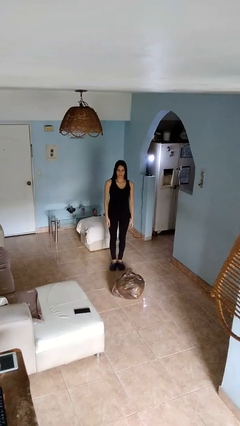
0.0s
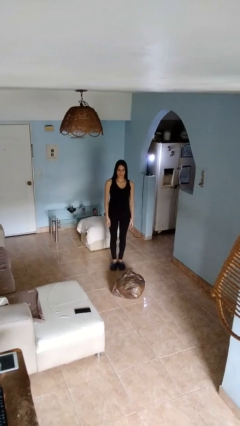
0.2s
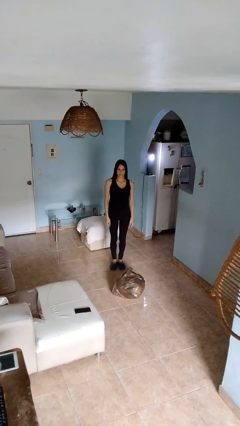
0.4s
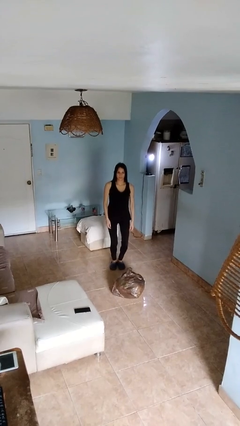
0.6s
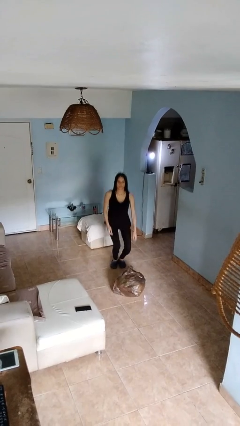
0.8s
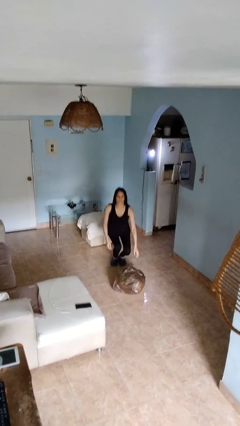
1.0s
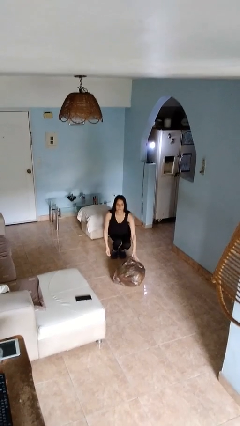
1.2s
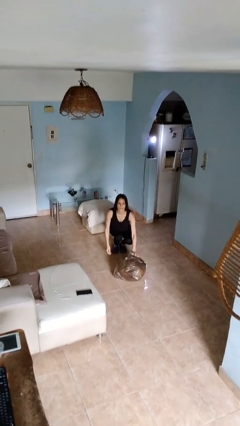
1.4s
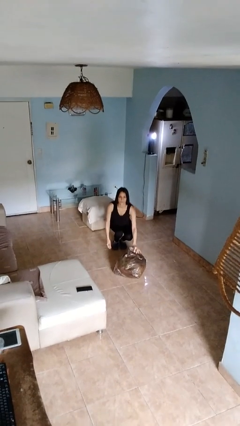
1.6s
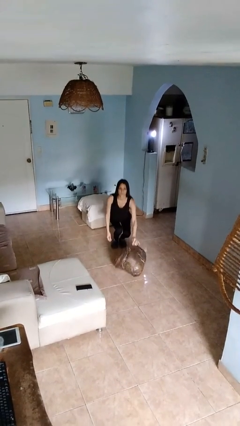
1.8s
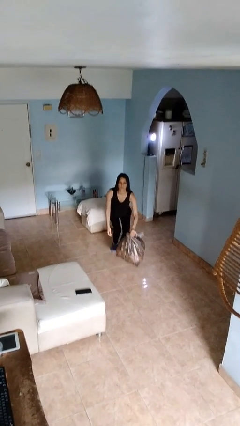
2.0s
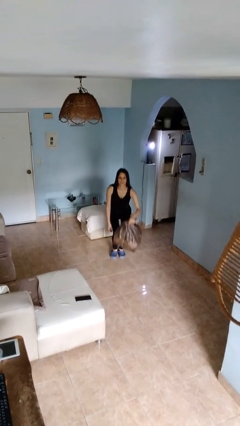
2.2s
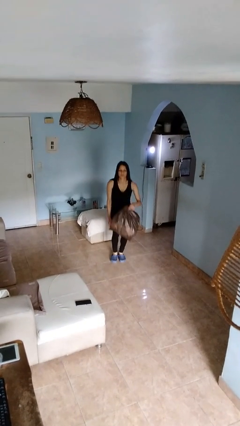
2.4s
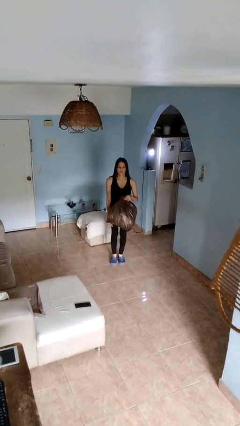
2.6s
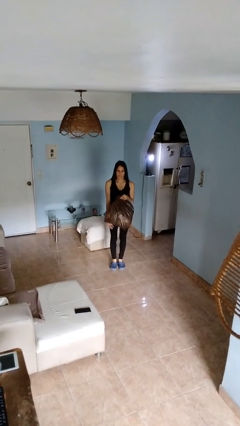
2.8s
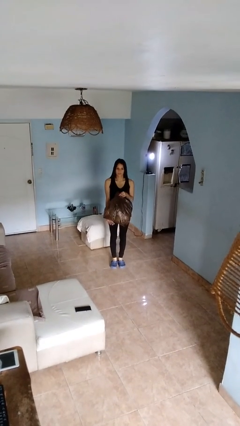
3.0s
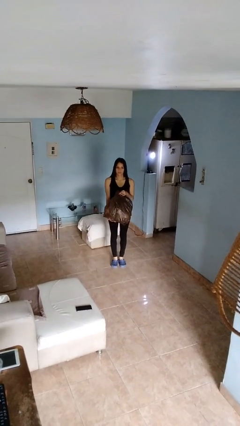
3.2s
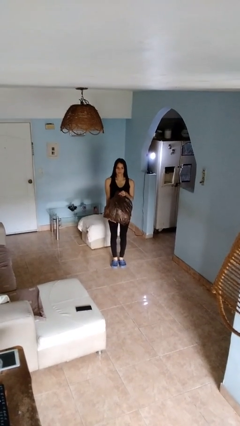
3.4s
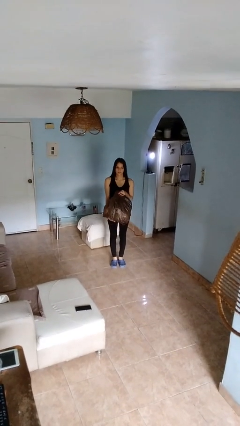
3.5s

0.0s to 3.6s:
person picks up object from floor

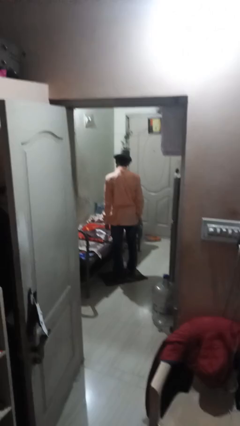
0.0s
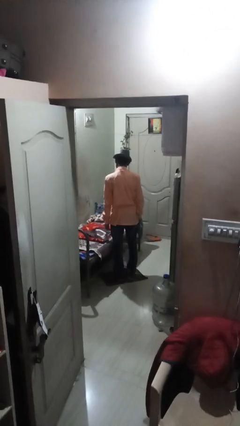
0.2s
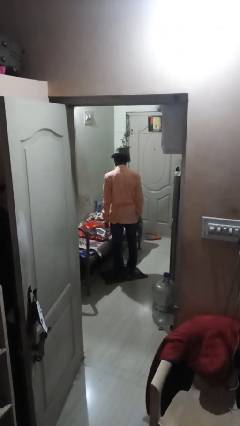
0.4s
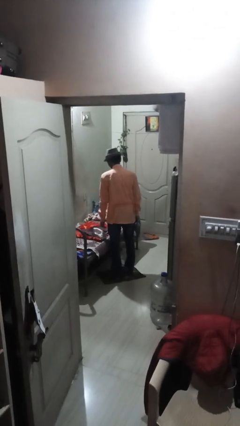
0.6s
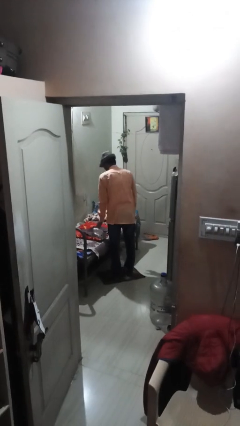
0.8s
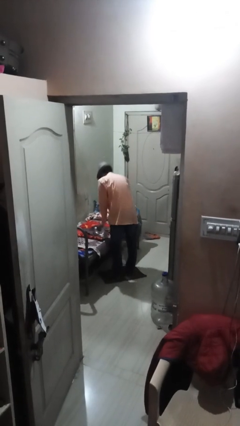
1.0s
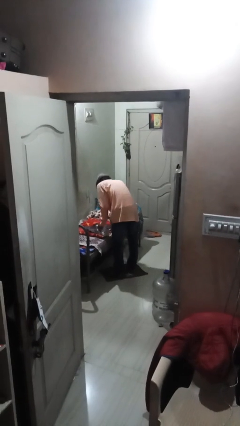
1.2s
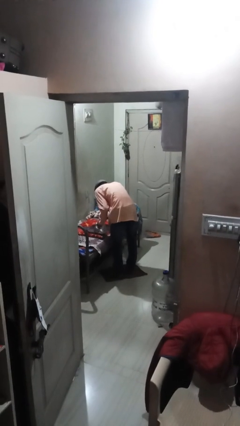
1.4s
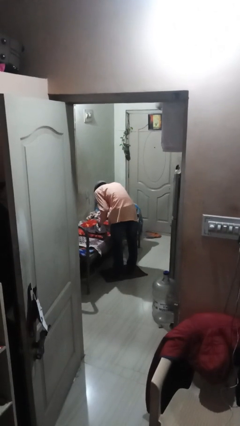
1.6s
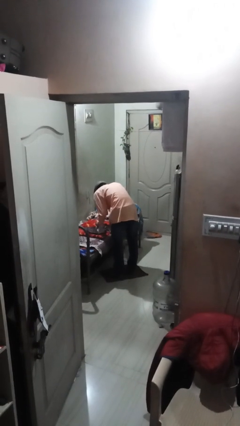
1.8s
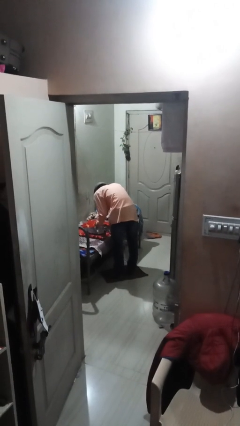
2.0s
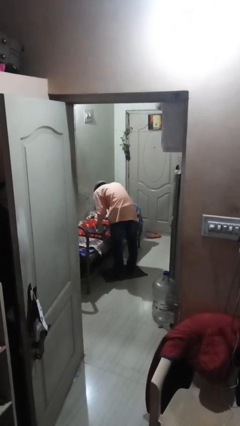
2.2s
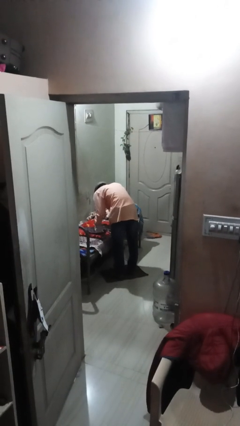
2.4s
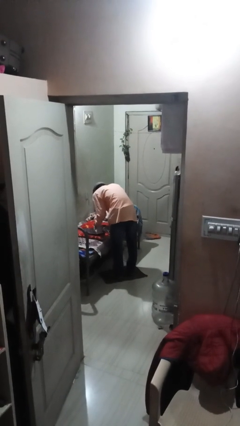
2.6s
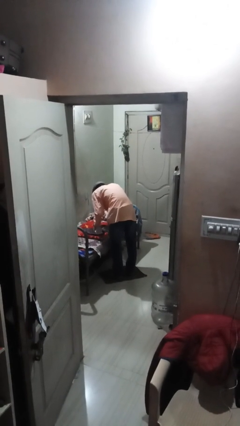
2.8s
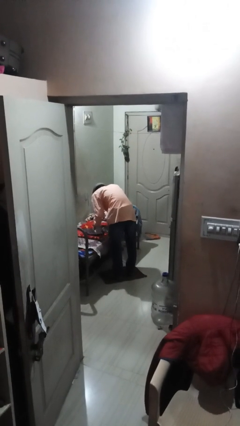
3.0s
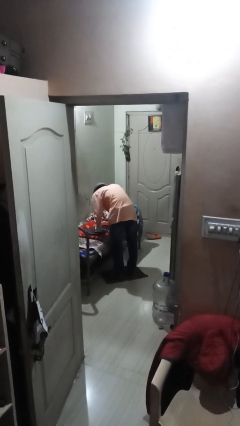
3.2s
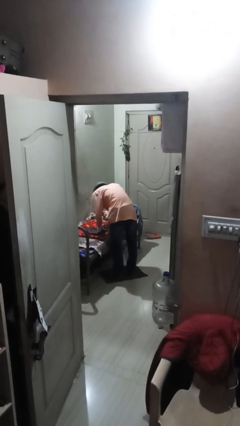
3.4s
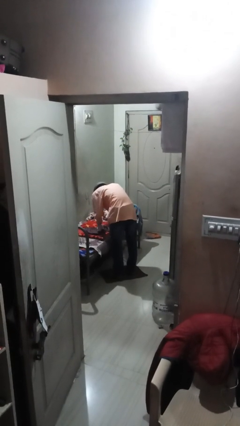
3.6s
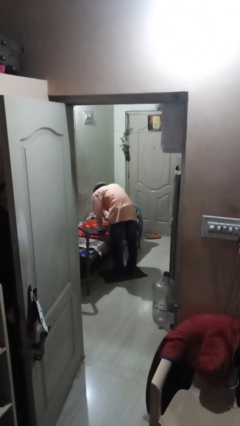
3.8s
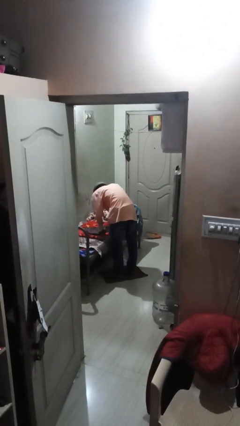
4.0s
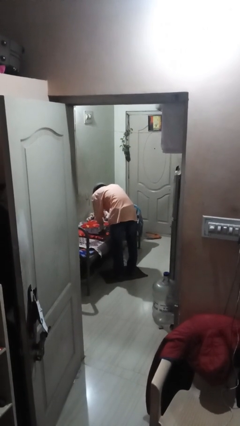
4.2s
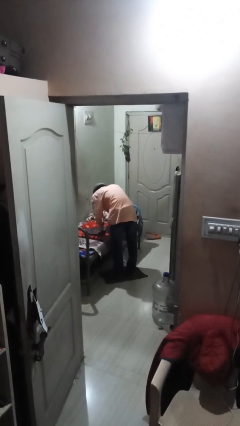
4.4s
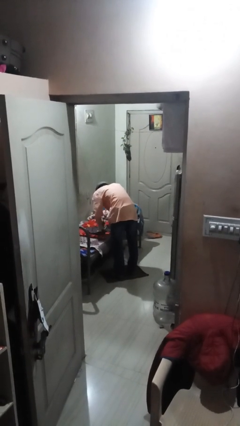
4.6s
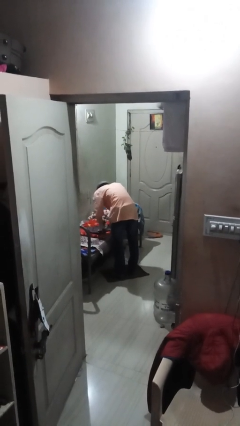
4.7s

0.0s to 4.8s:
person irons clothes

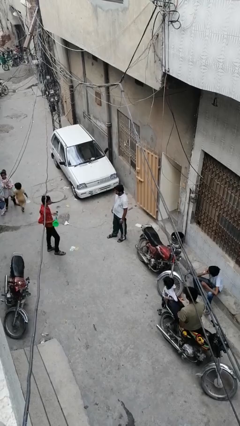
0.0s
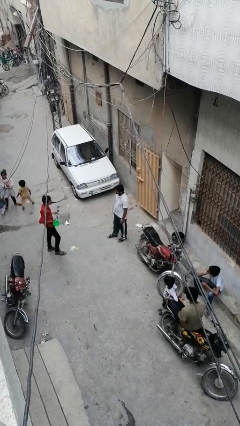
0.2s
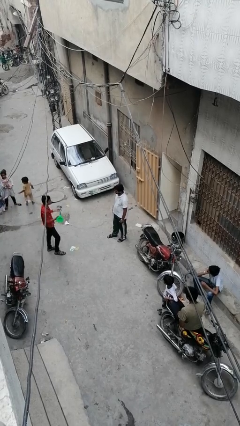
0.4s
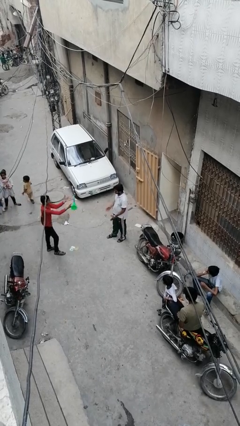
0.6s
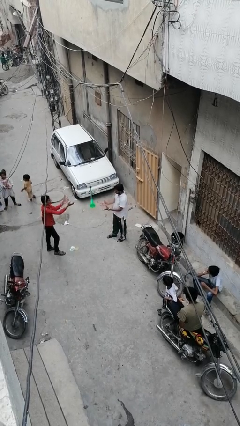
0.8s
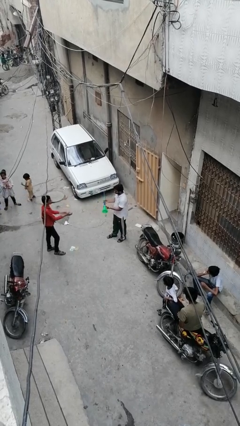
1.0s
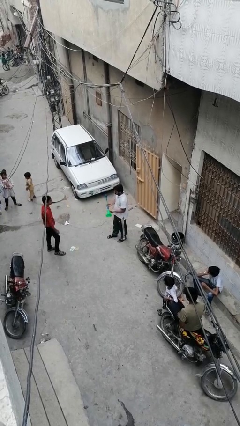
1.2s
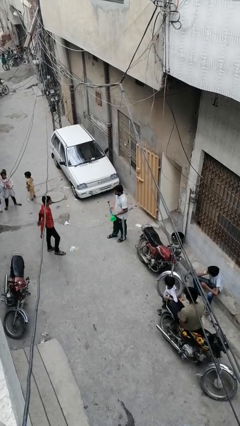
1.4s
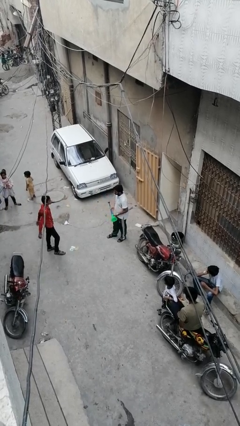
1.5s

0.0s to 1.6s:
person catches object from person

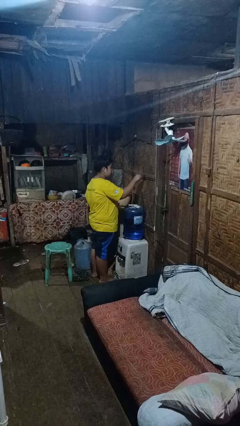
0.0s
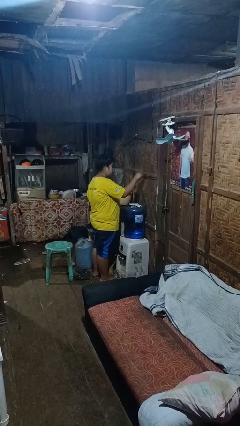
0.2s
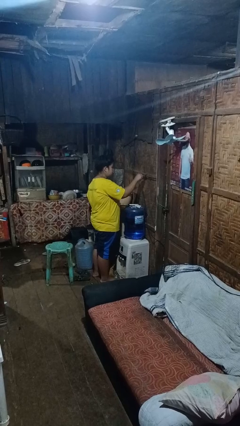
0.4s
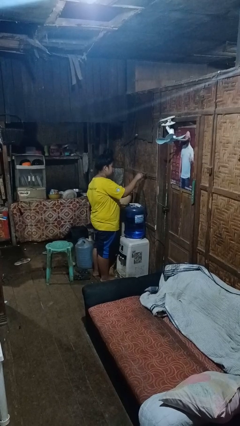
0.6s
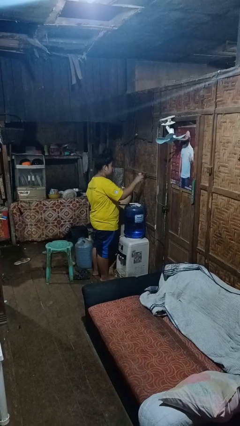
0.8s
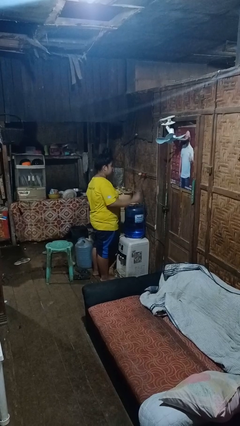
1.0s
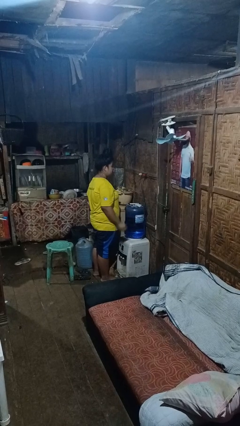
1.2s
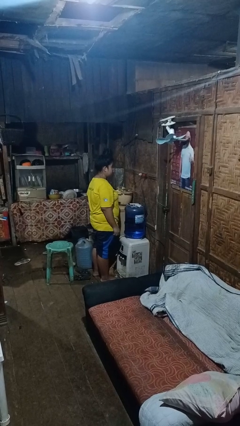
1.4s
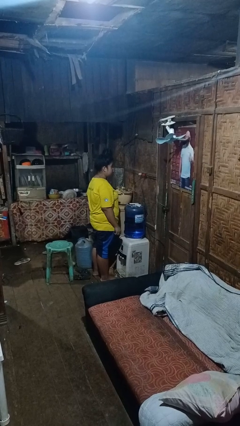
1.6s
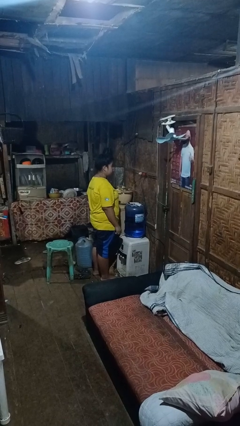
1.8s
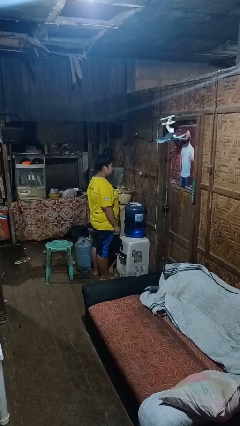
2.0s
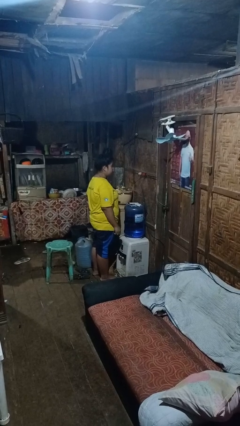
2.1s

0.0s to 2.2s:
person plugs into electrical socket

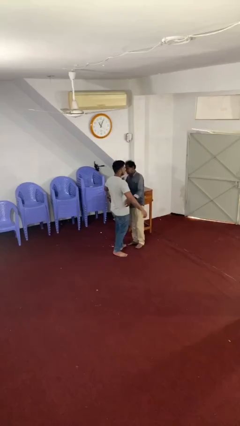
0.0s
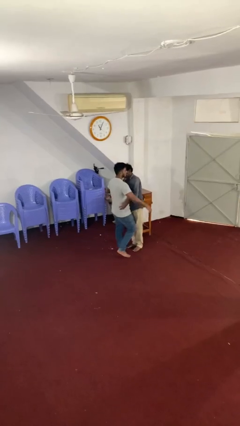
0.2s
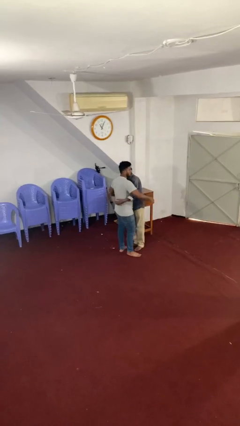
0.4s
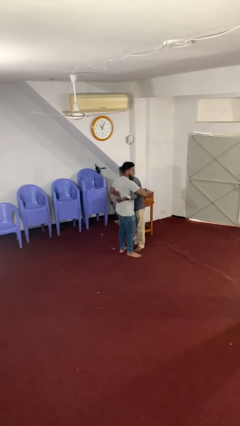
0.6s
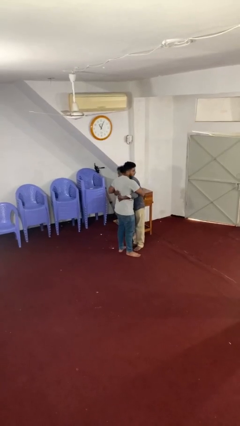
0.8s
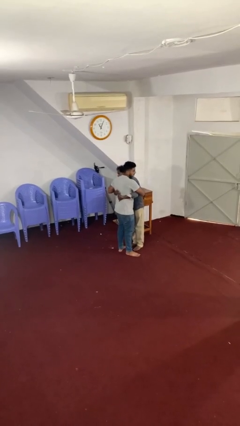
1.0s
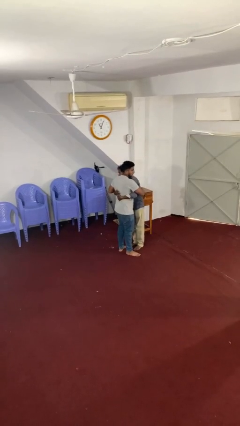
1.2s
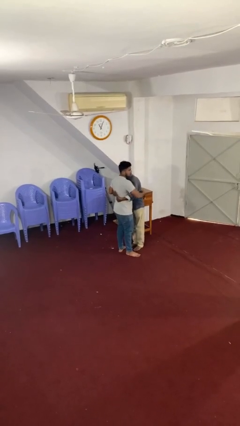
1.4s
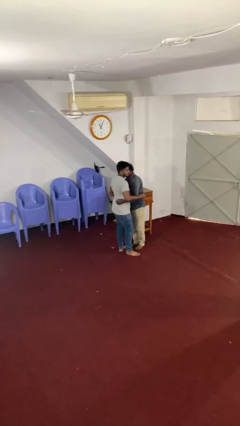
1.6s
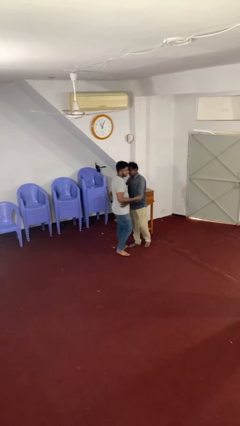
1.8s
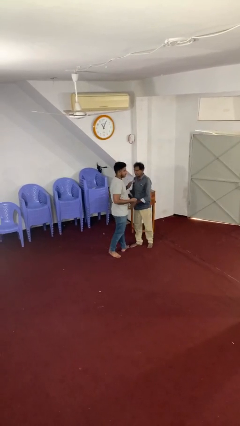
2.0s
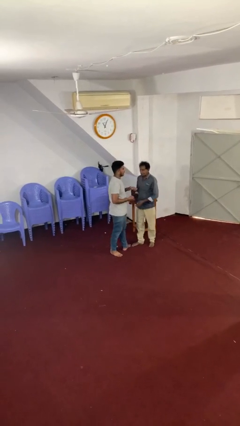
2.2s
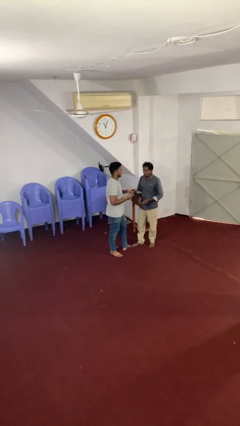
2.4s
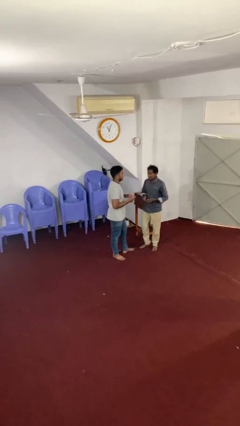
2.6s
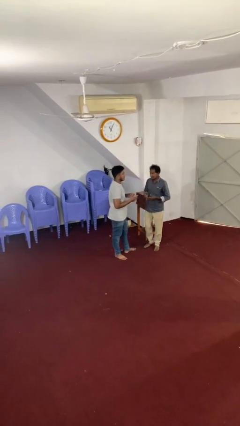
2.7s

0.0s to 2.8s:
person embraces person

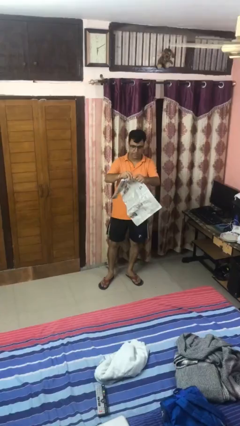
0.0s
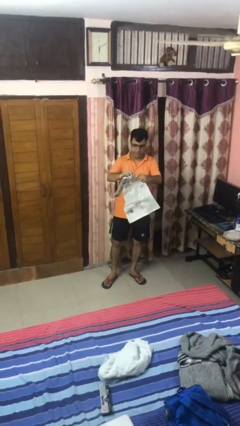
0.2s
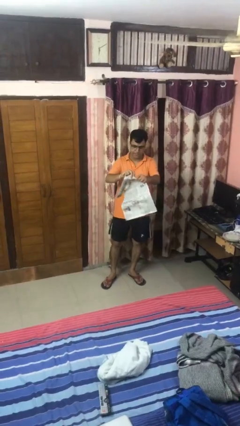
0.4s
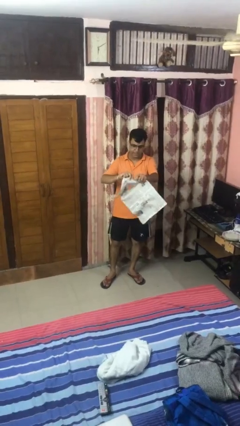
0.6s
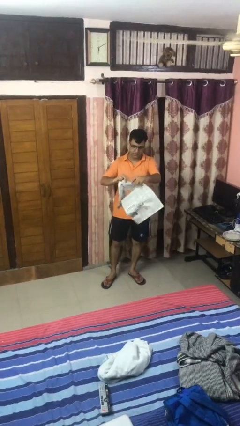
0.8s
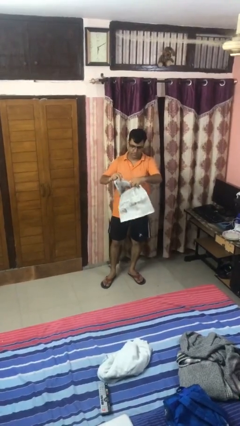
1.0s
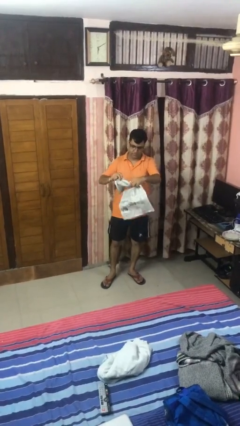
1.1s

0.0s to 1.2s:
person tears paper

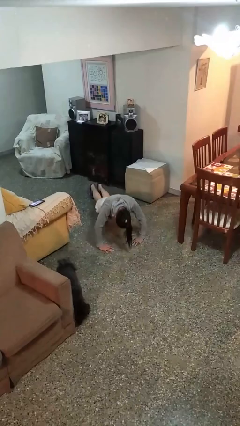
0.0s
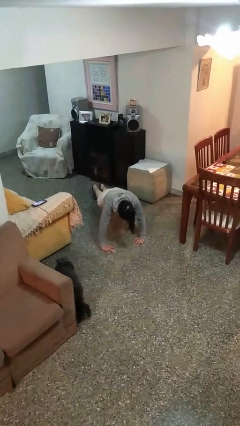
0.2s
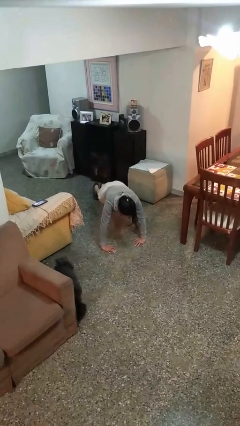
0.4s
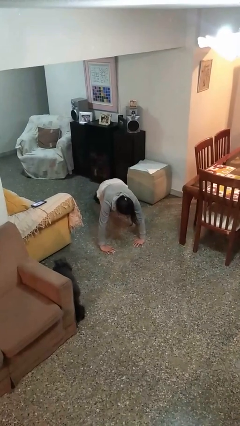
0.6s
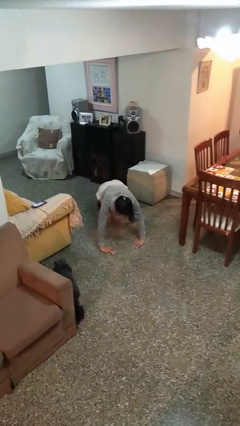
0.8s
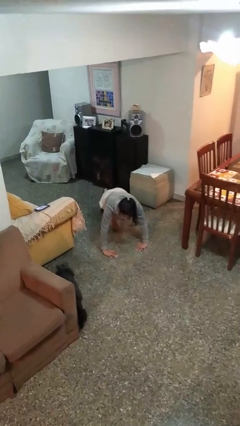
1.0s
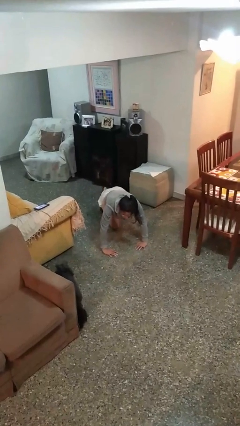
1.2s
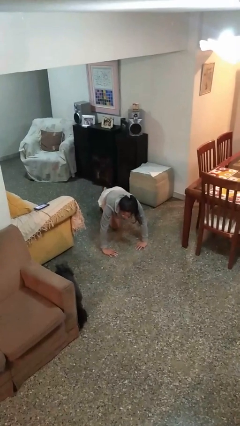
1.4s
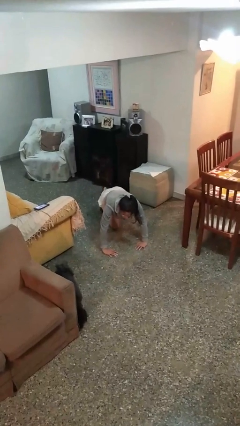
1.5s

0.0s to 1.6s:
person exercises with pushup
